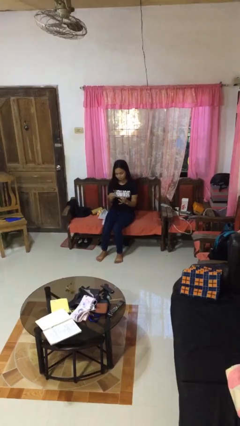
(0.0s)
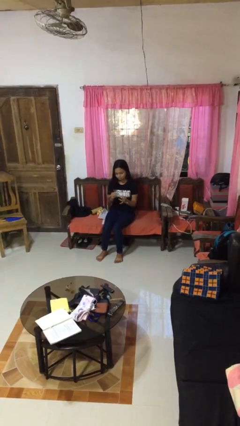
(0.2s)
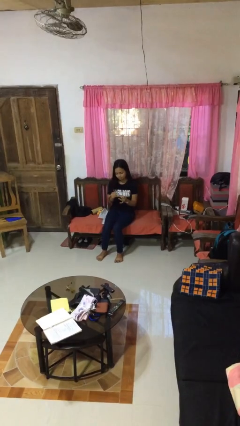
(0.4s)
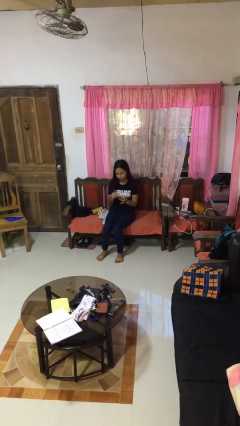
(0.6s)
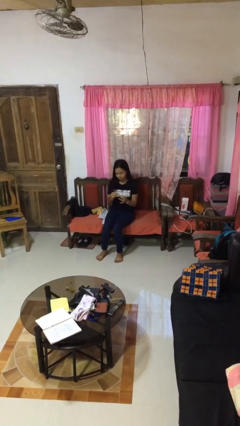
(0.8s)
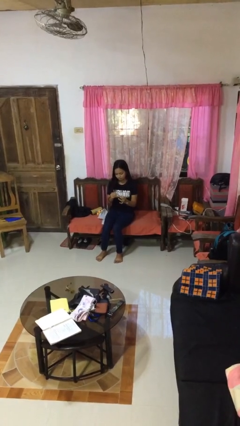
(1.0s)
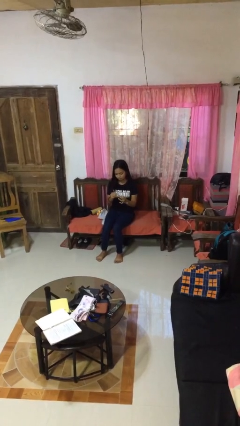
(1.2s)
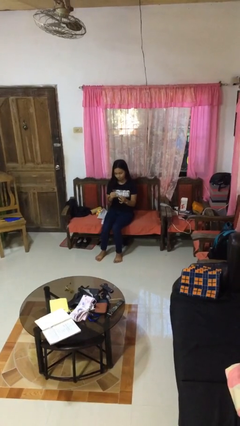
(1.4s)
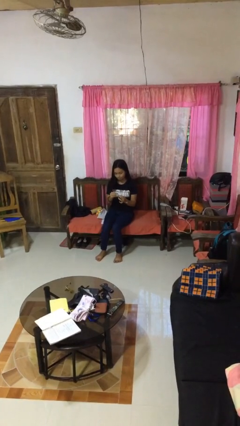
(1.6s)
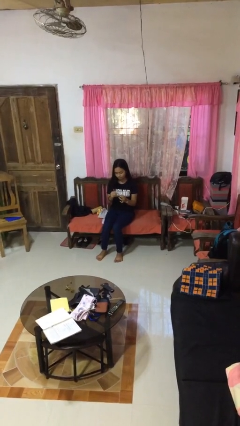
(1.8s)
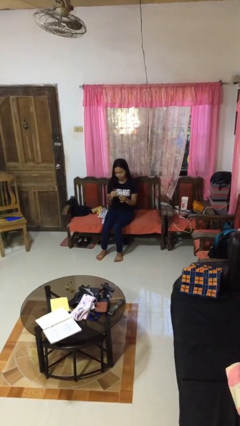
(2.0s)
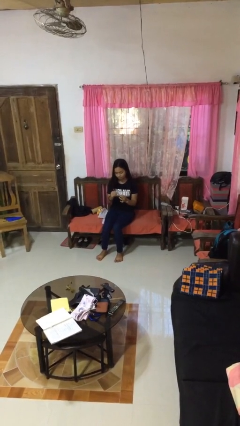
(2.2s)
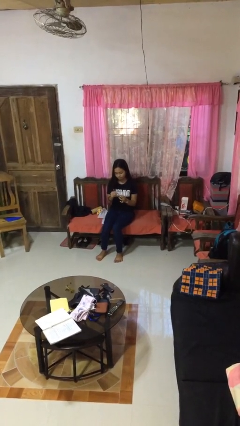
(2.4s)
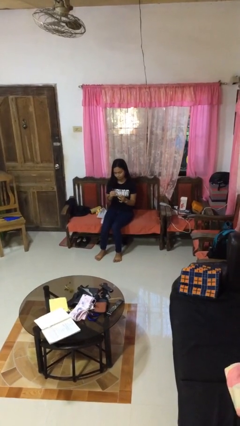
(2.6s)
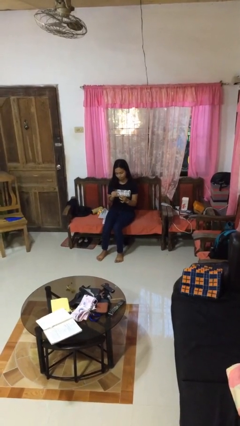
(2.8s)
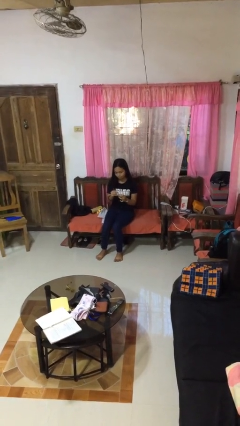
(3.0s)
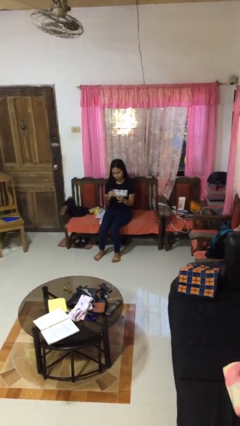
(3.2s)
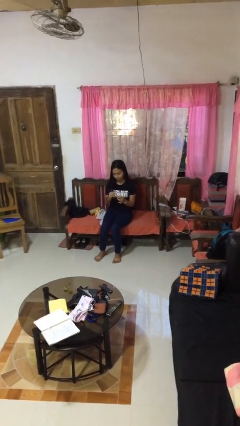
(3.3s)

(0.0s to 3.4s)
person clips fingernails

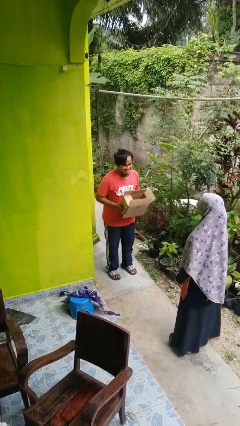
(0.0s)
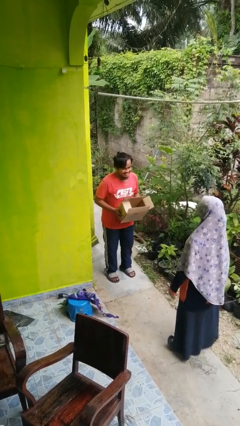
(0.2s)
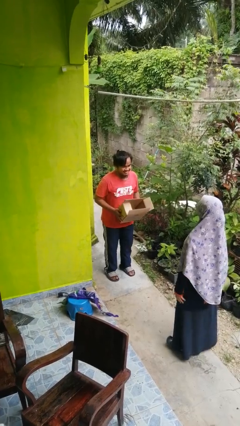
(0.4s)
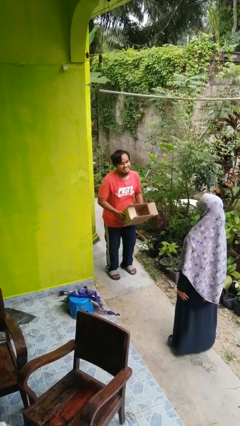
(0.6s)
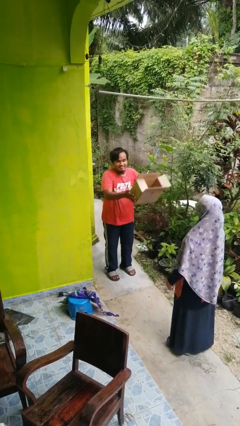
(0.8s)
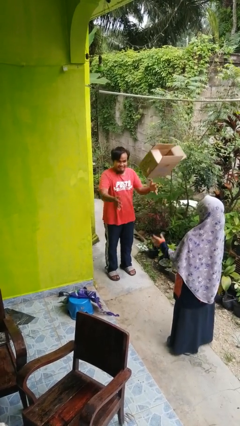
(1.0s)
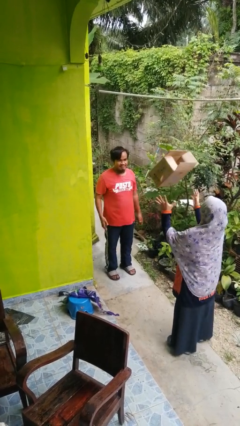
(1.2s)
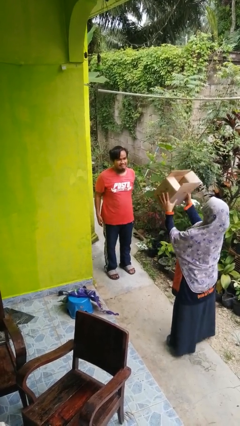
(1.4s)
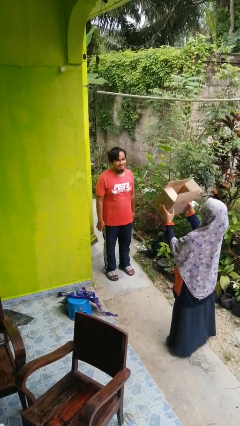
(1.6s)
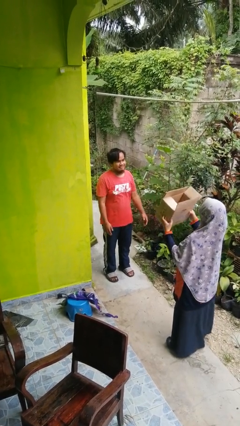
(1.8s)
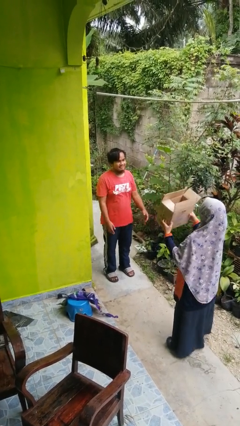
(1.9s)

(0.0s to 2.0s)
person throws object to person

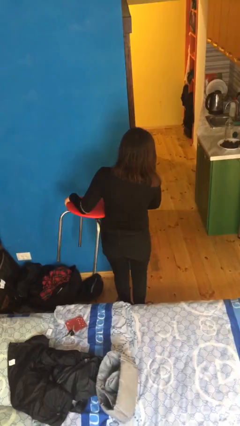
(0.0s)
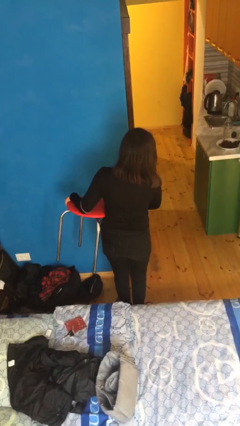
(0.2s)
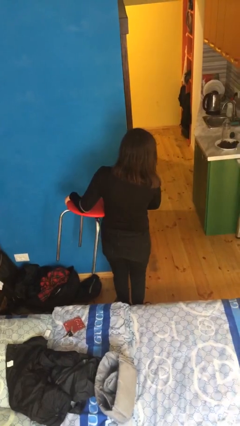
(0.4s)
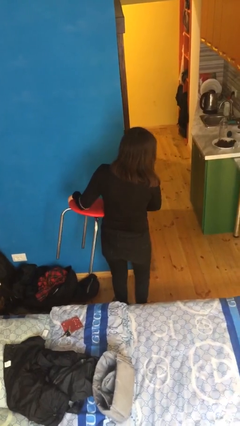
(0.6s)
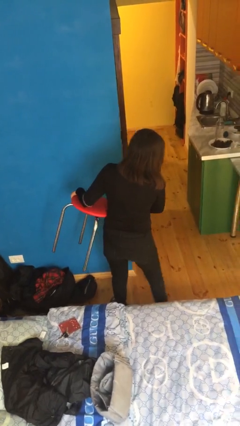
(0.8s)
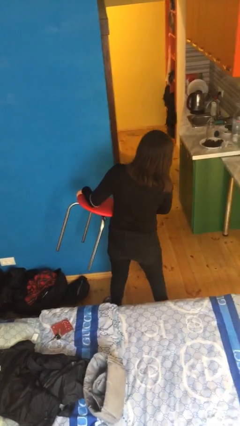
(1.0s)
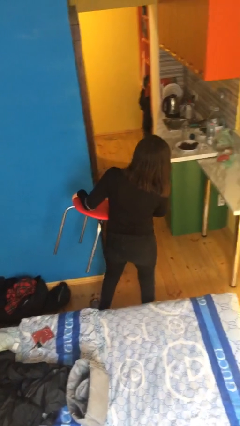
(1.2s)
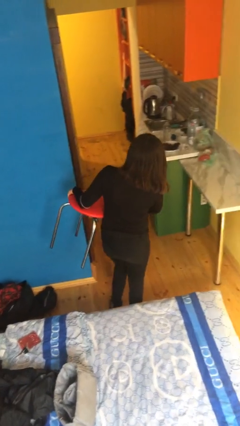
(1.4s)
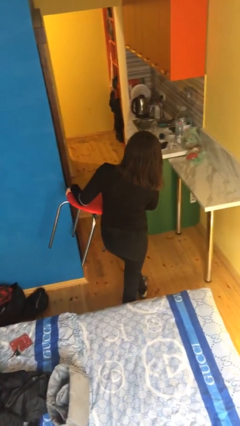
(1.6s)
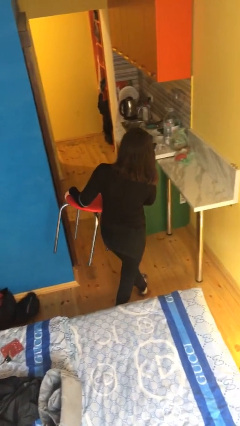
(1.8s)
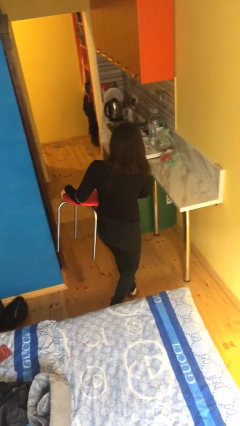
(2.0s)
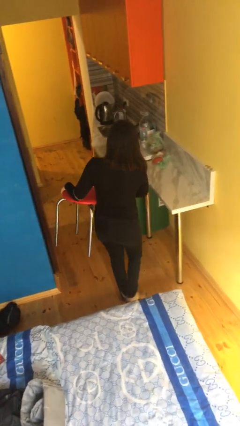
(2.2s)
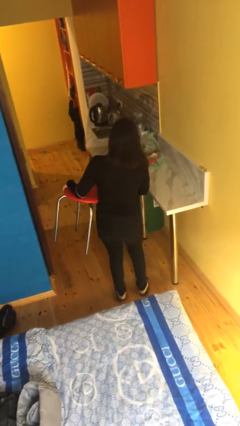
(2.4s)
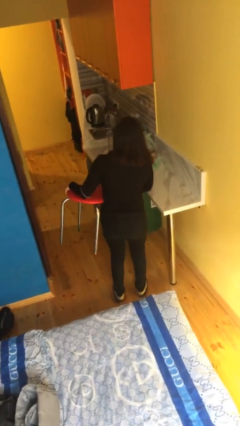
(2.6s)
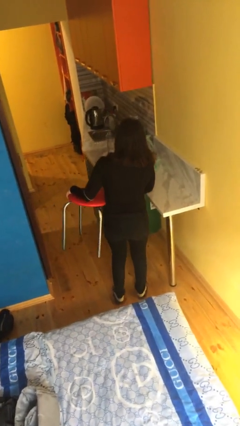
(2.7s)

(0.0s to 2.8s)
person carries furniture

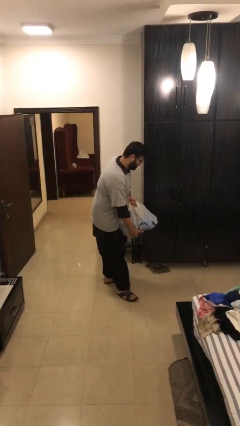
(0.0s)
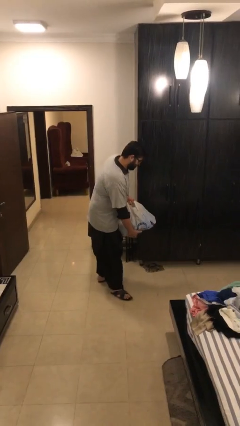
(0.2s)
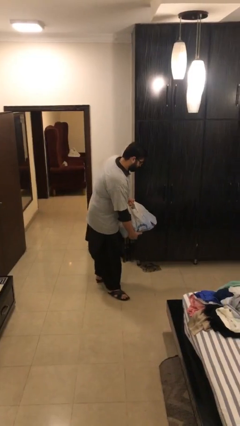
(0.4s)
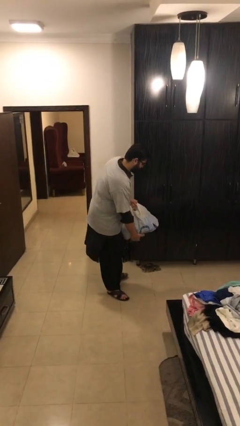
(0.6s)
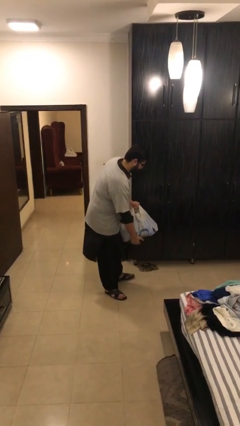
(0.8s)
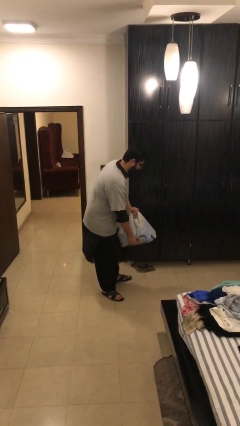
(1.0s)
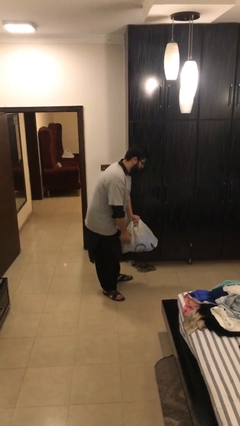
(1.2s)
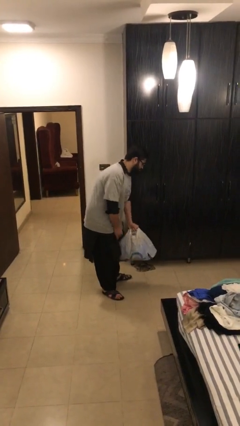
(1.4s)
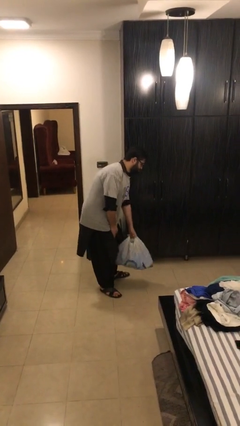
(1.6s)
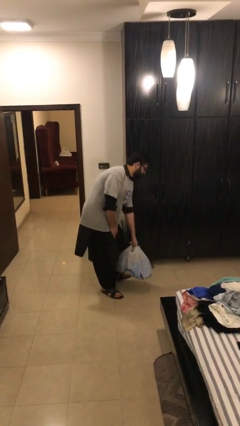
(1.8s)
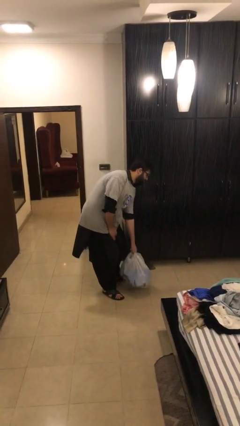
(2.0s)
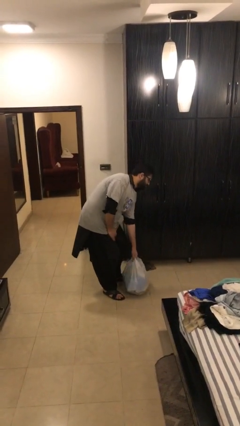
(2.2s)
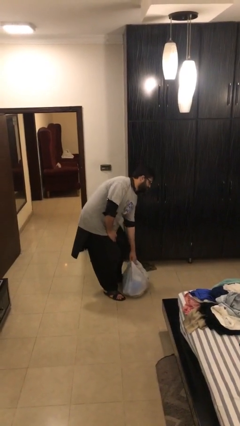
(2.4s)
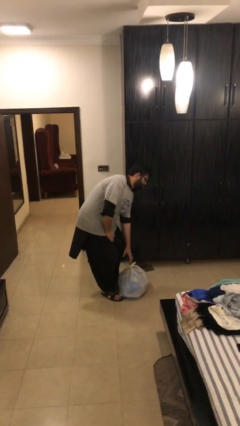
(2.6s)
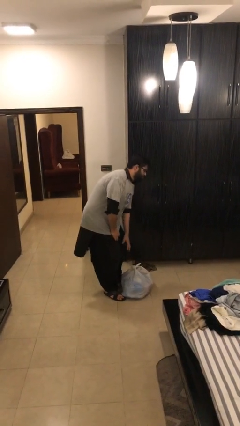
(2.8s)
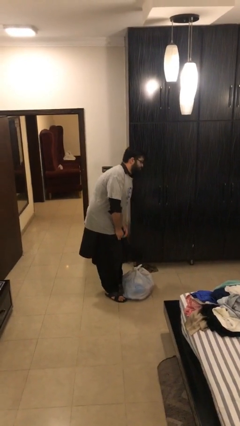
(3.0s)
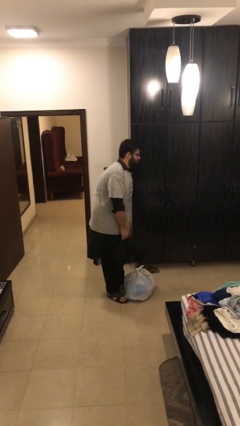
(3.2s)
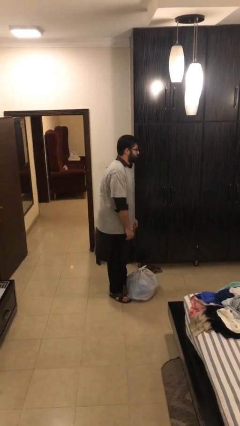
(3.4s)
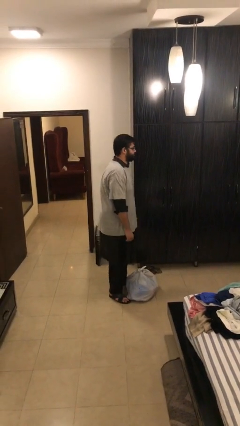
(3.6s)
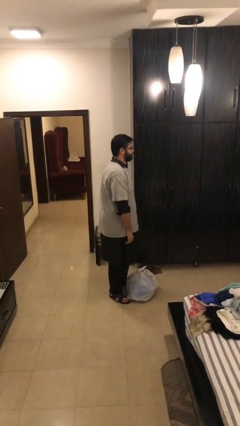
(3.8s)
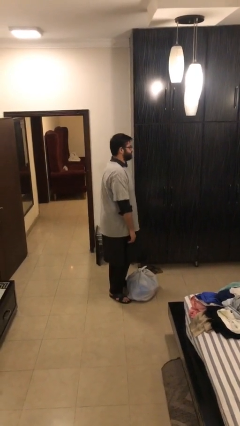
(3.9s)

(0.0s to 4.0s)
person puts down object on floor

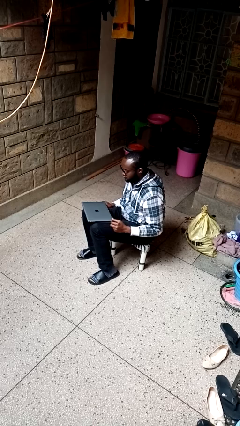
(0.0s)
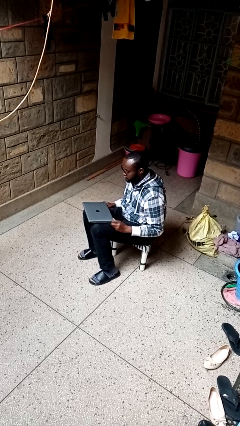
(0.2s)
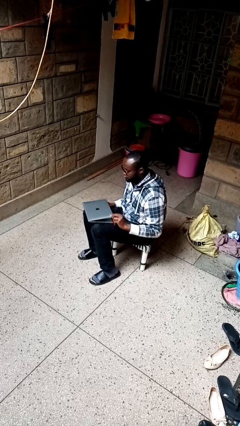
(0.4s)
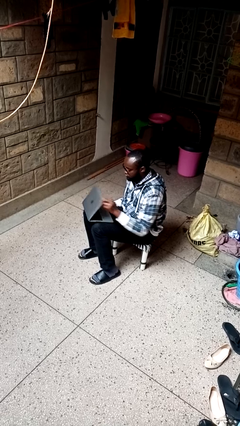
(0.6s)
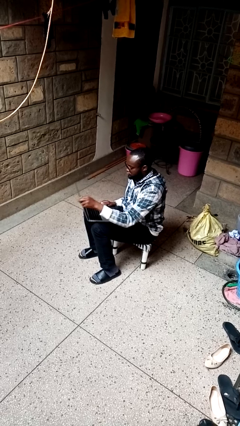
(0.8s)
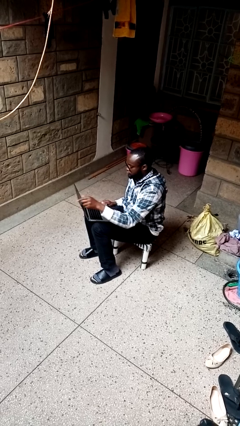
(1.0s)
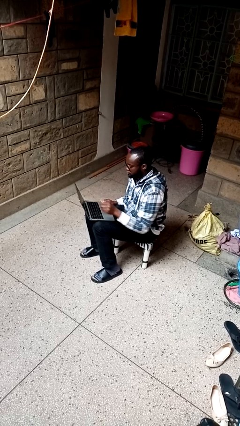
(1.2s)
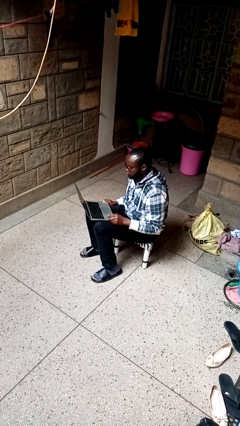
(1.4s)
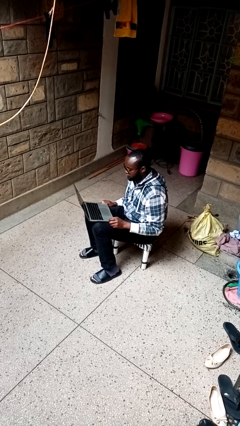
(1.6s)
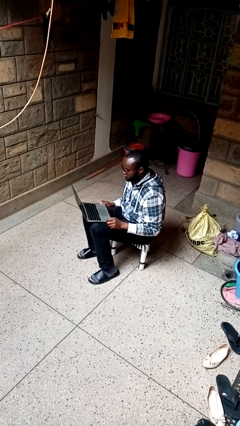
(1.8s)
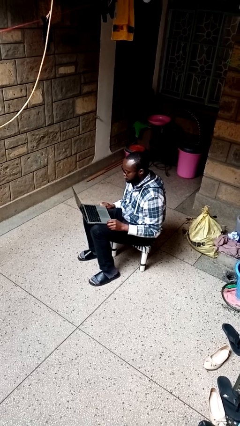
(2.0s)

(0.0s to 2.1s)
person opens laptop

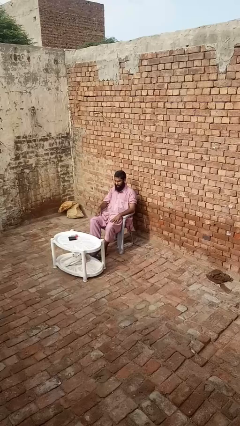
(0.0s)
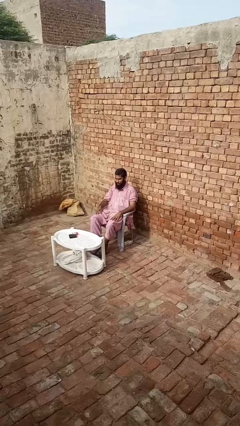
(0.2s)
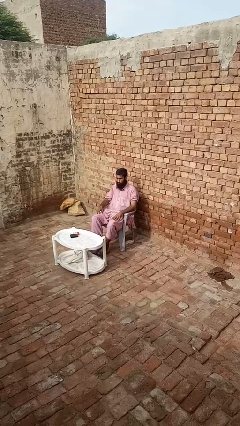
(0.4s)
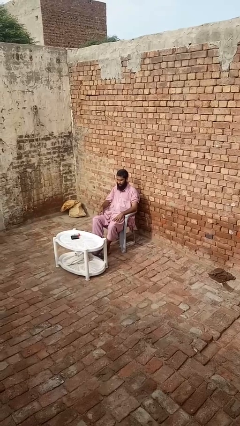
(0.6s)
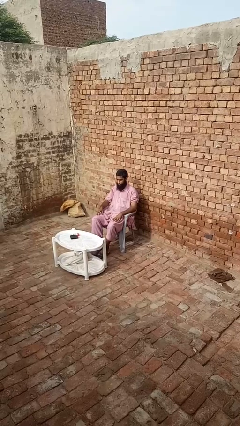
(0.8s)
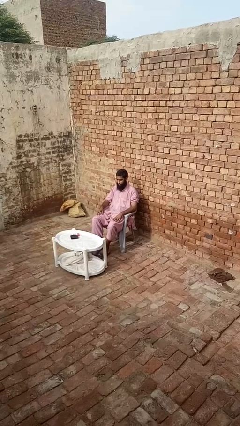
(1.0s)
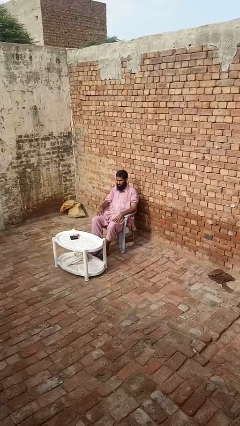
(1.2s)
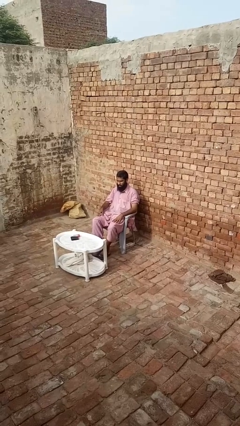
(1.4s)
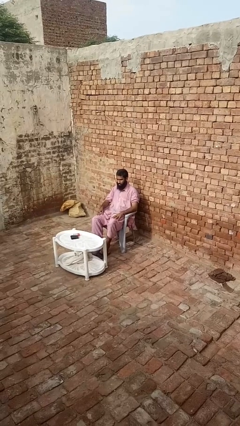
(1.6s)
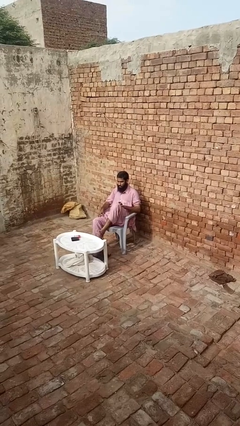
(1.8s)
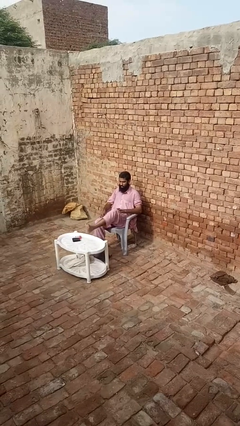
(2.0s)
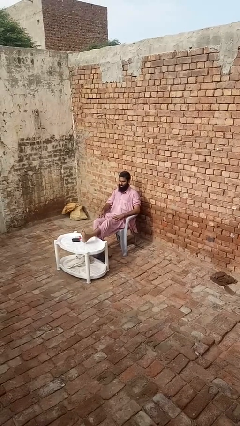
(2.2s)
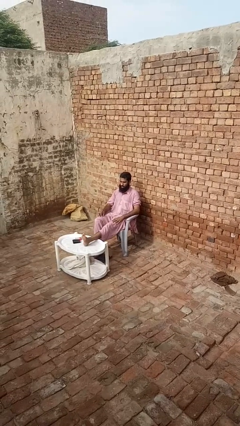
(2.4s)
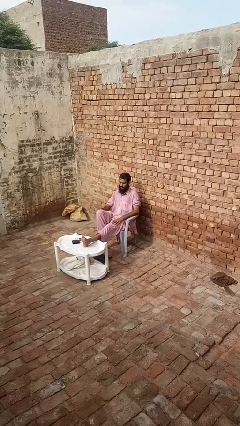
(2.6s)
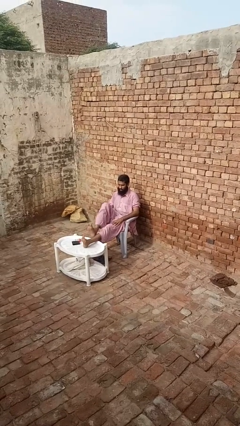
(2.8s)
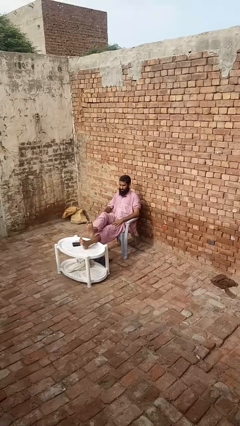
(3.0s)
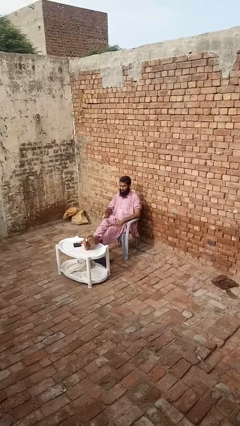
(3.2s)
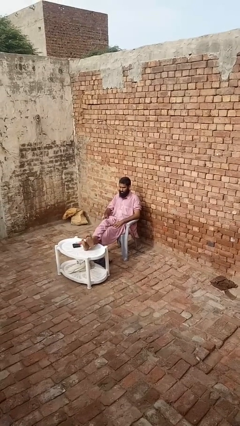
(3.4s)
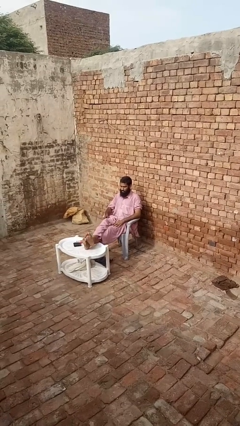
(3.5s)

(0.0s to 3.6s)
person puts feet up
